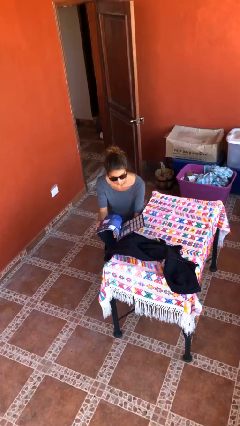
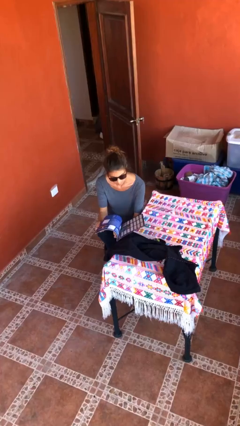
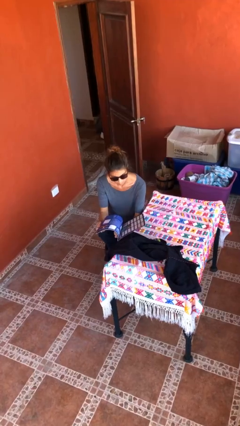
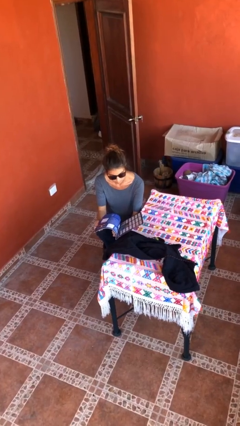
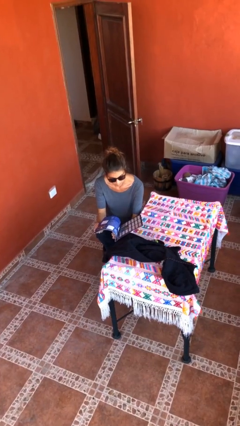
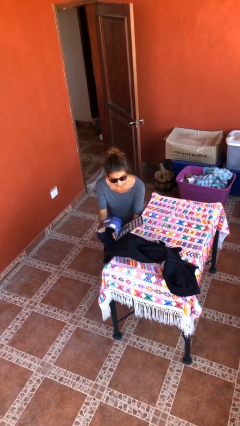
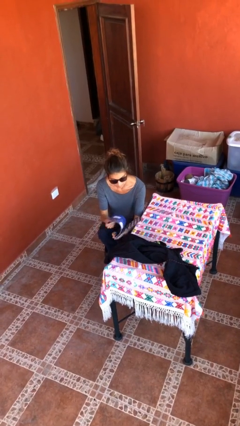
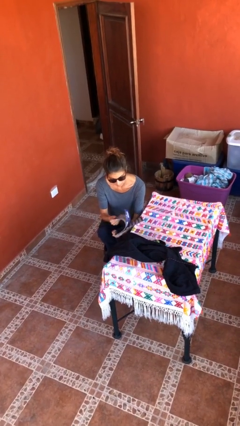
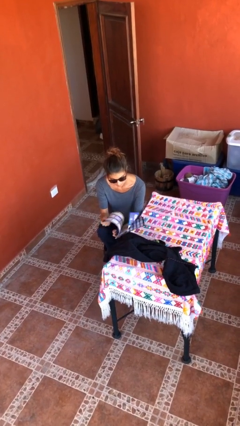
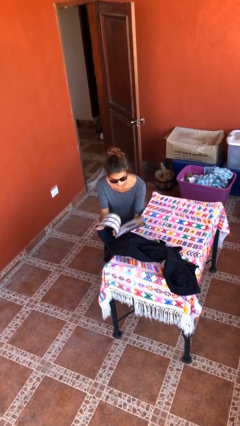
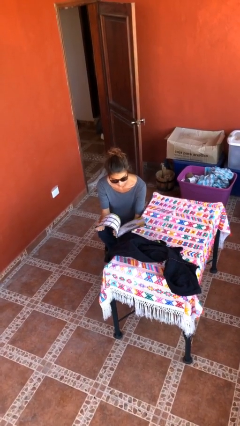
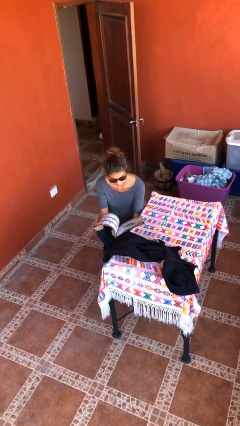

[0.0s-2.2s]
person reads document

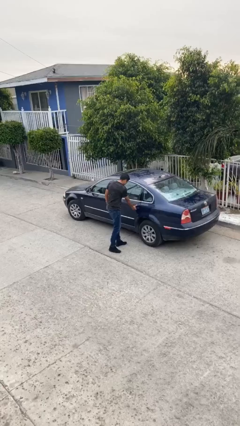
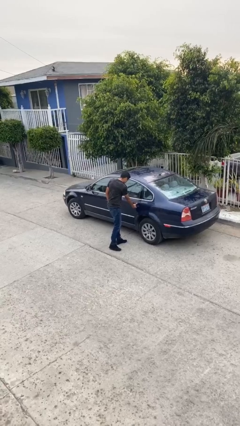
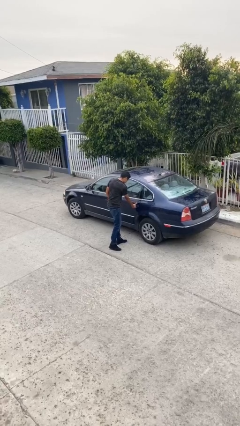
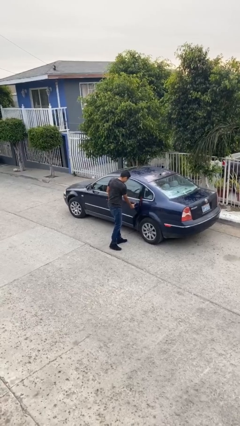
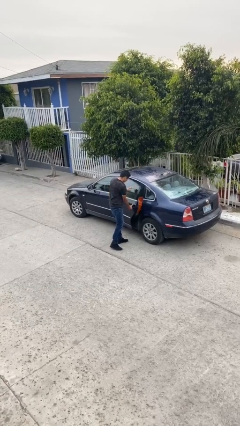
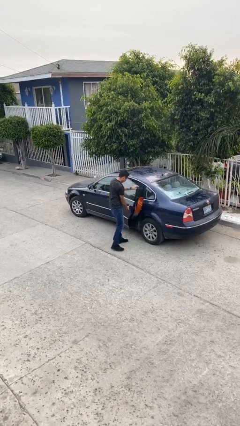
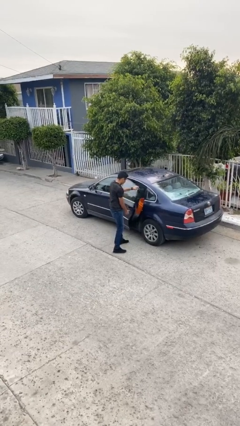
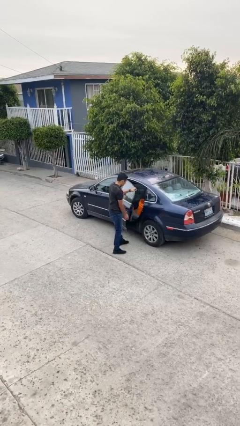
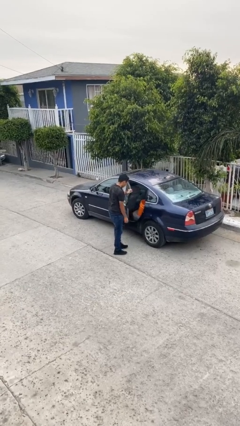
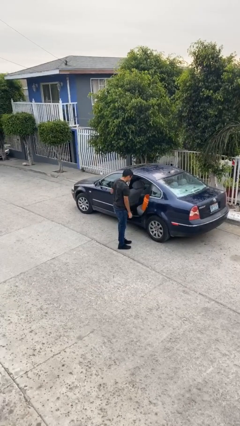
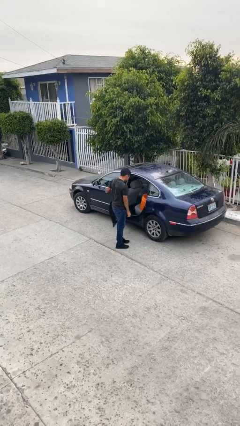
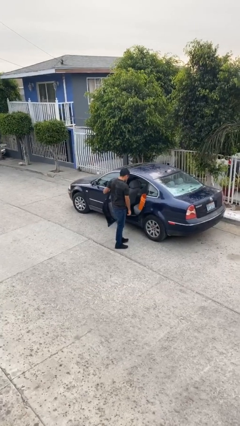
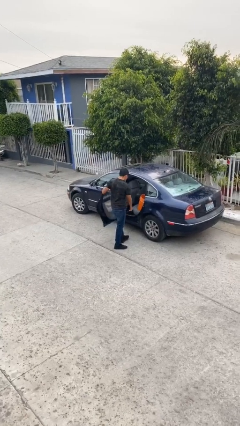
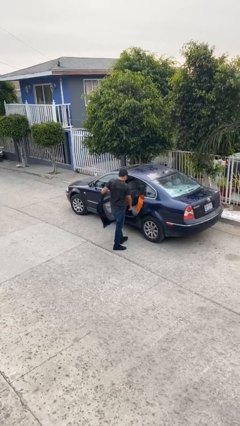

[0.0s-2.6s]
person opens car door

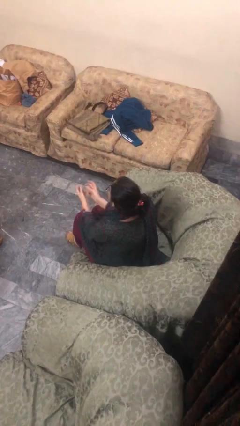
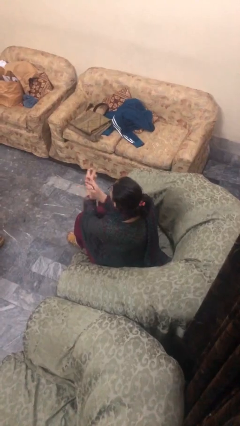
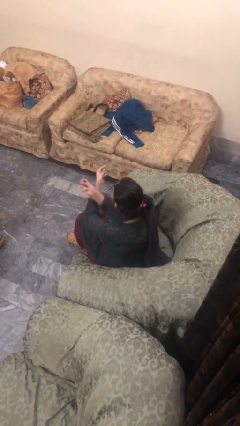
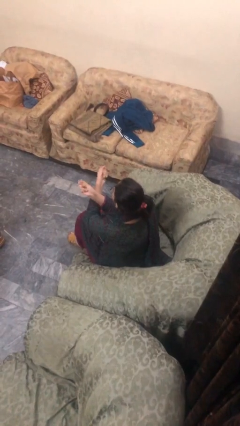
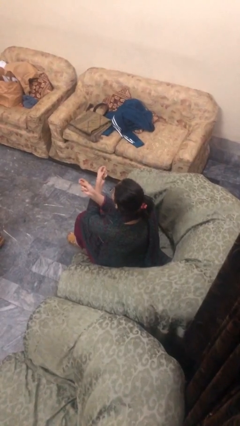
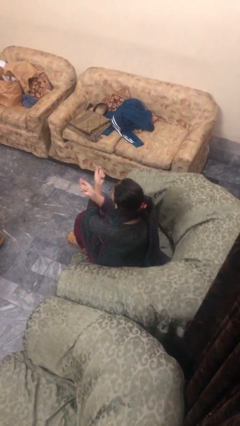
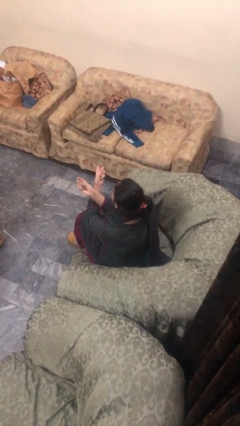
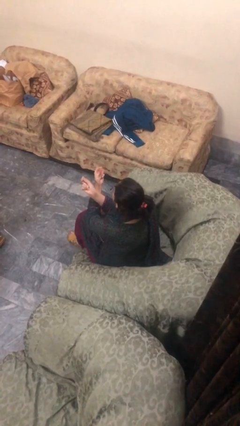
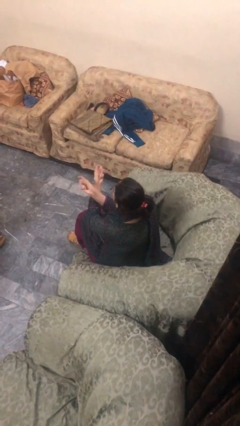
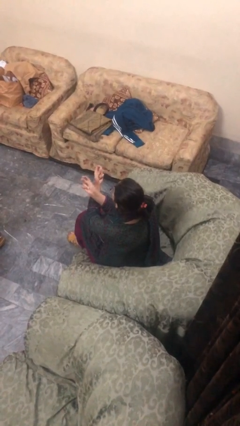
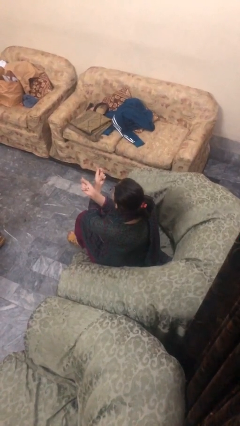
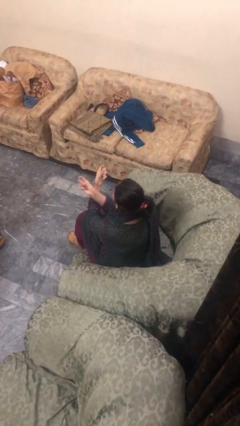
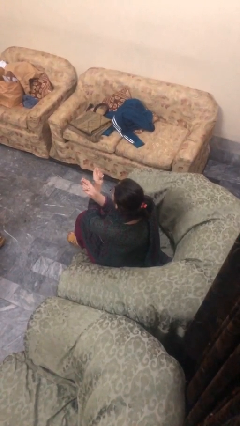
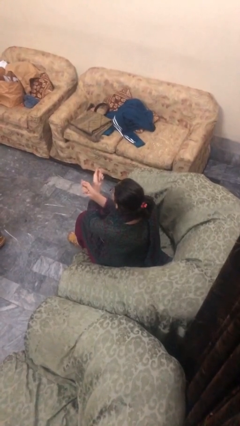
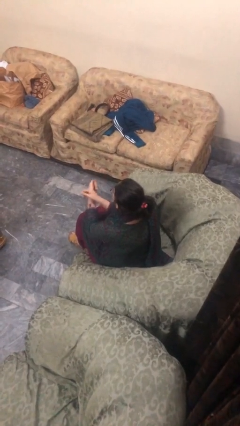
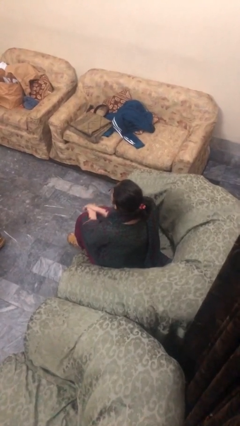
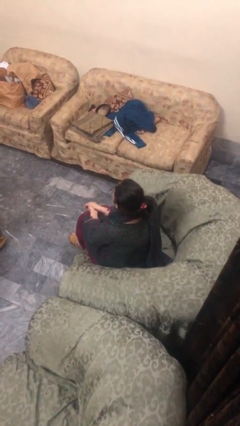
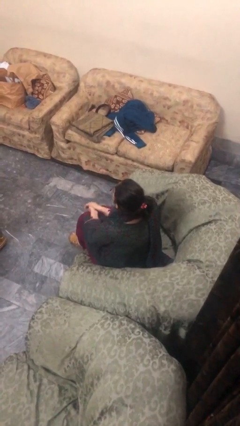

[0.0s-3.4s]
person snaps fingers

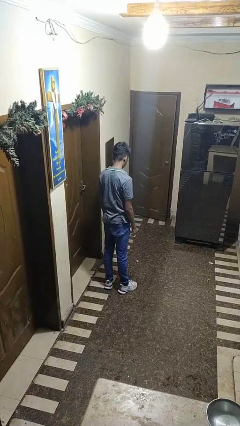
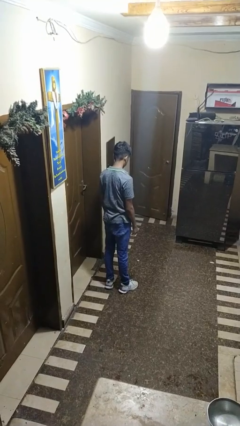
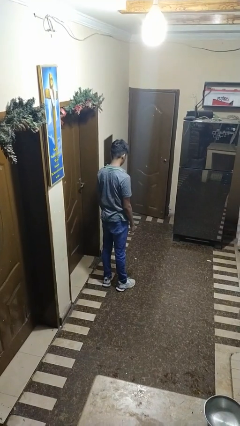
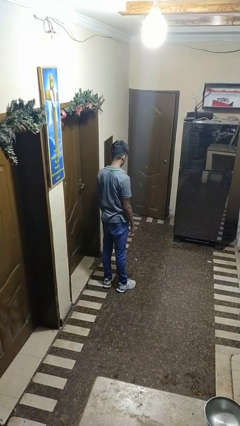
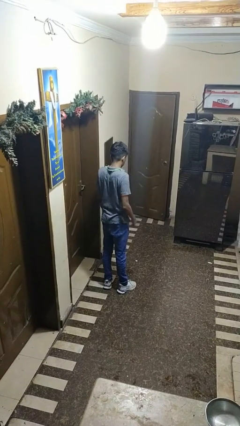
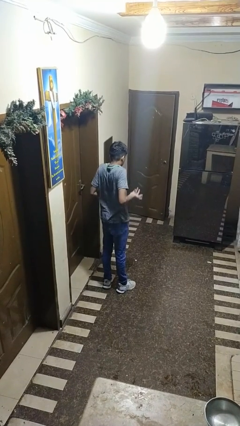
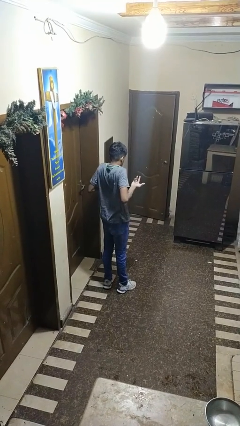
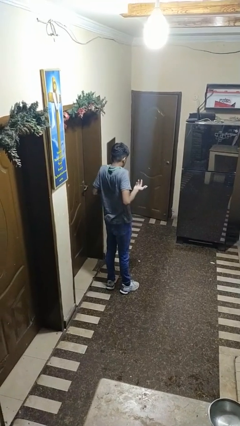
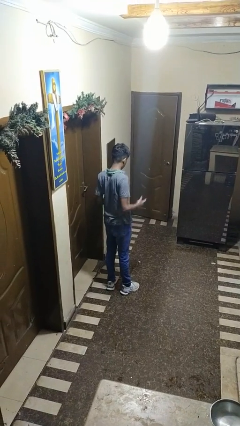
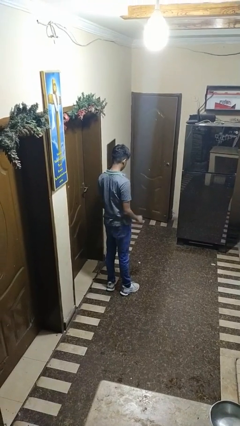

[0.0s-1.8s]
person shrugs

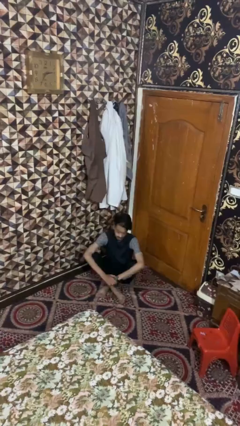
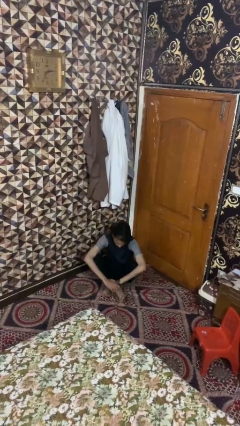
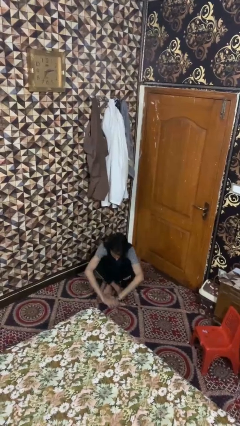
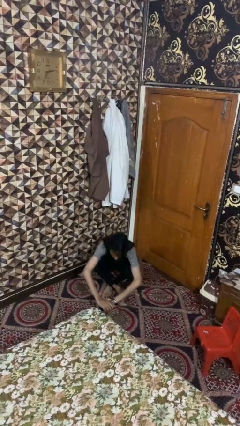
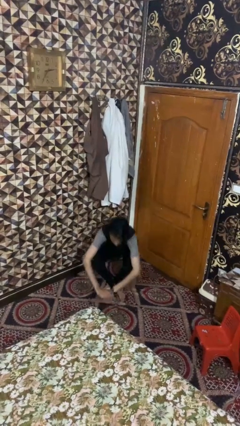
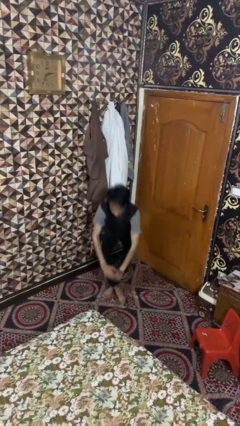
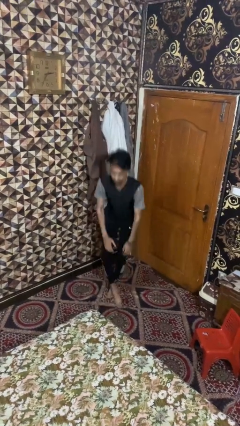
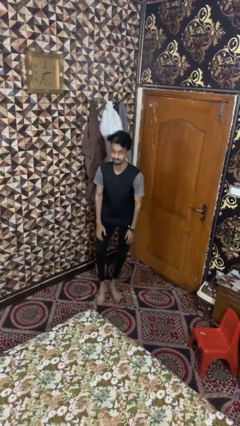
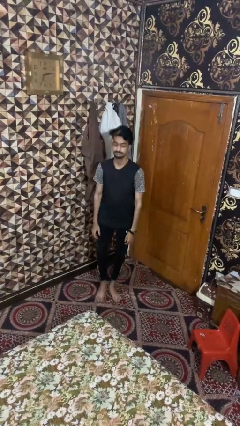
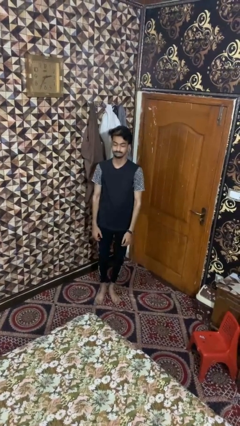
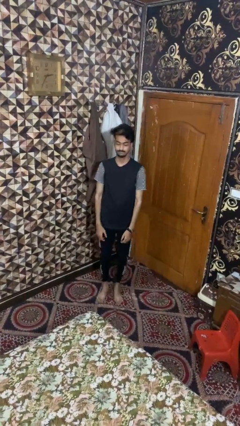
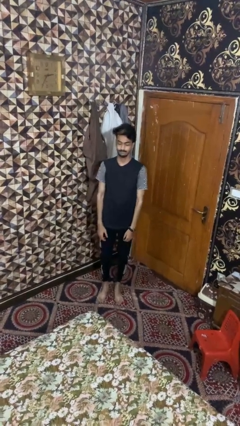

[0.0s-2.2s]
person stands up from floor

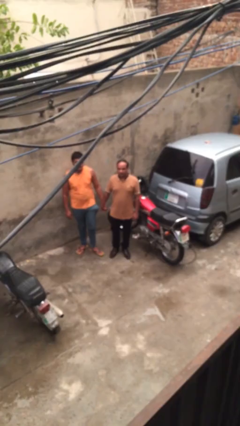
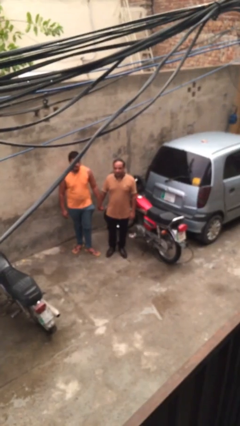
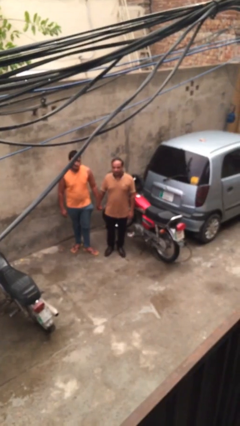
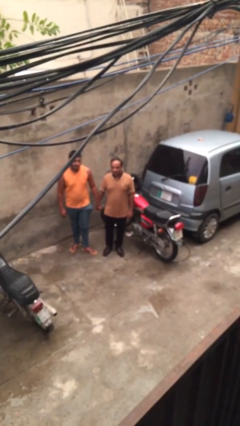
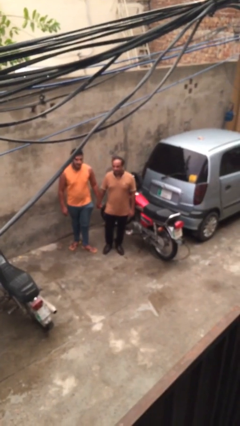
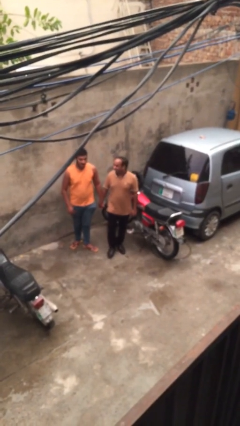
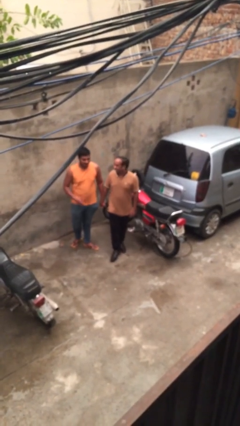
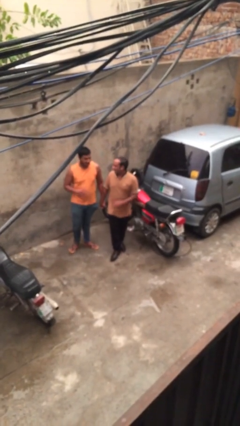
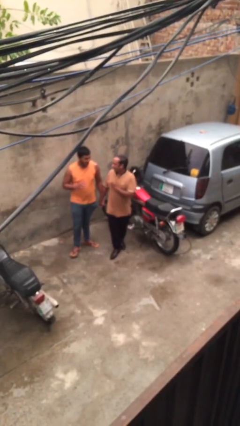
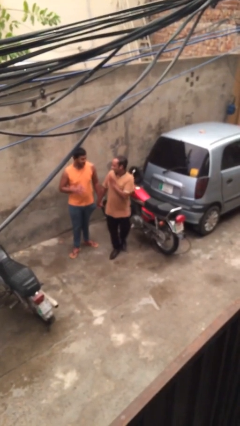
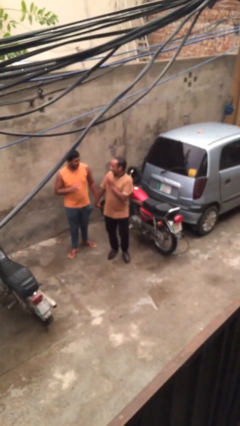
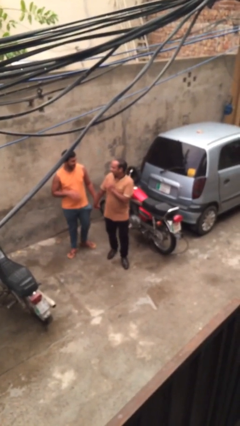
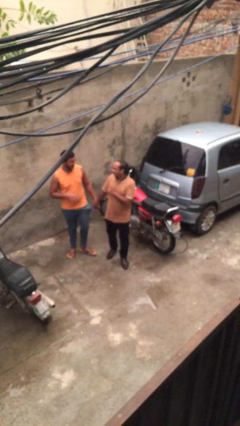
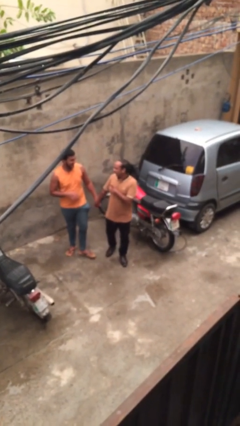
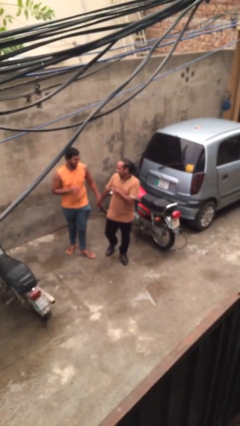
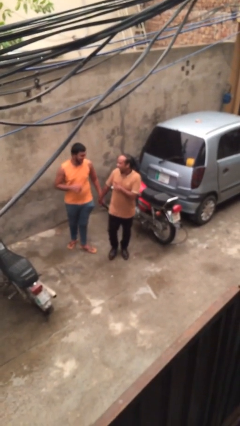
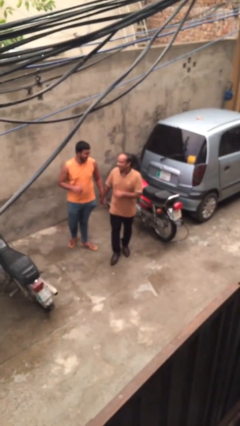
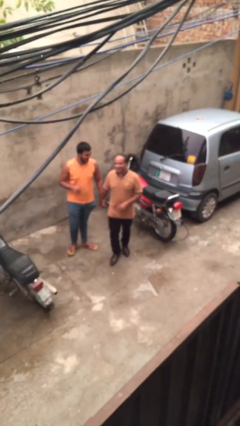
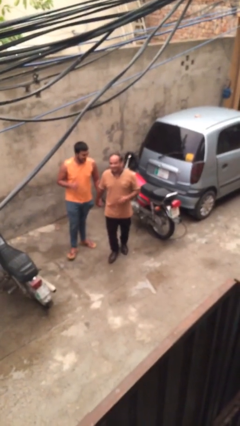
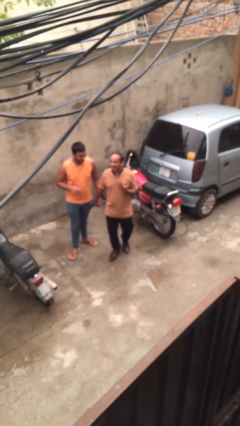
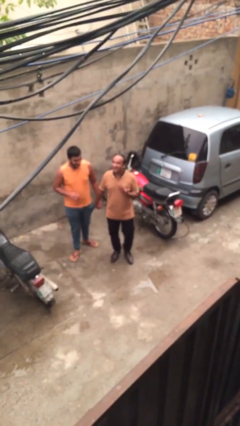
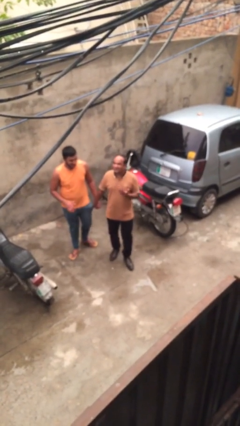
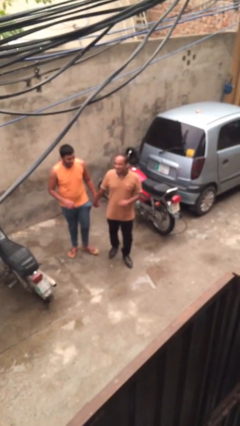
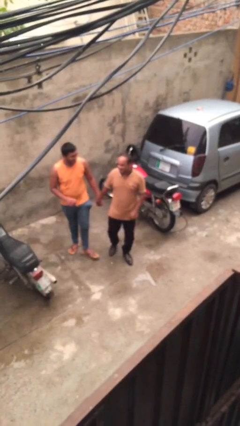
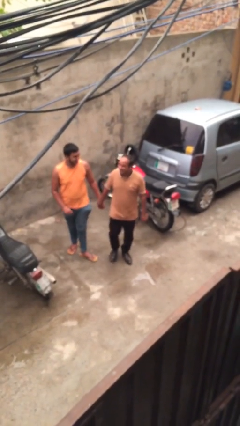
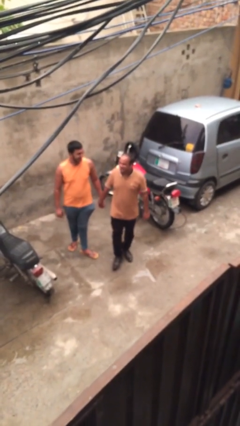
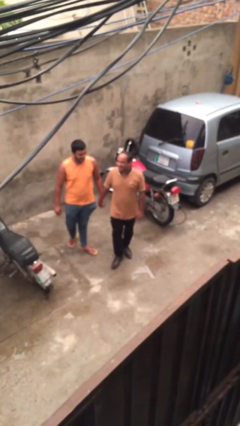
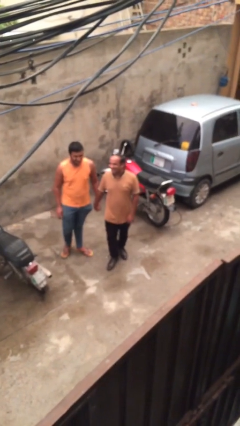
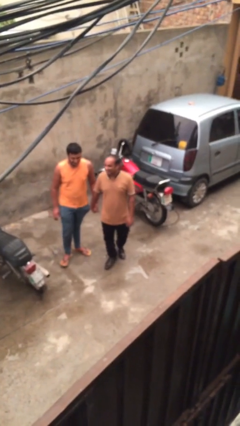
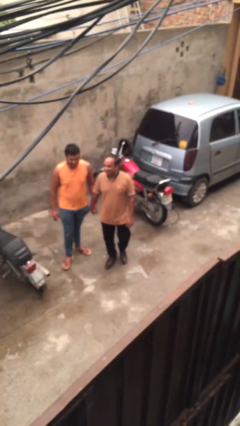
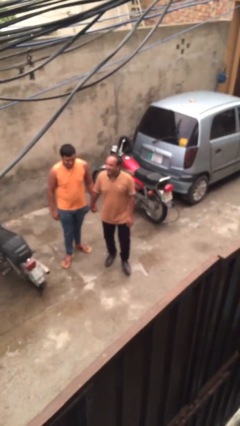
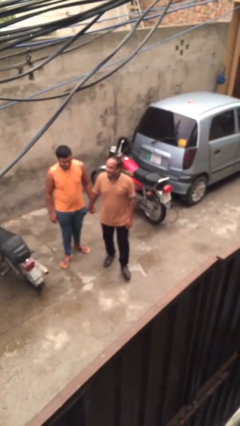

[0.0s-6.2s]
person holds hand
